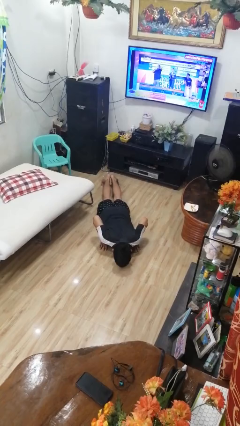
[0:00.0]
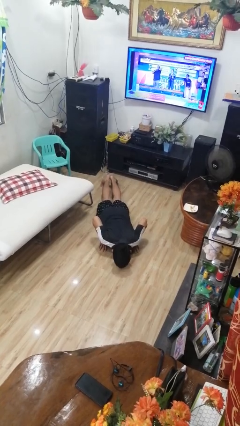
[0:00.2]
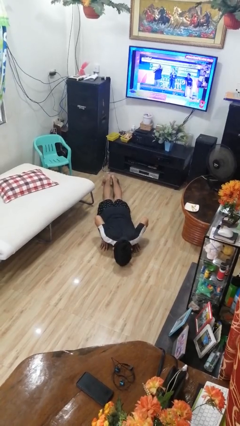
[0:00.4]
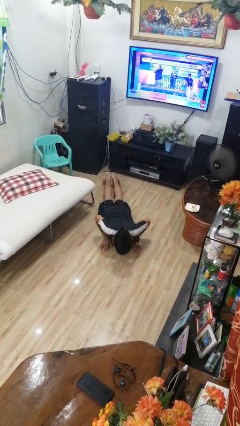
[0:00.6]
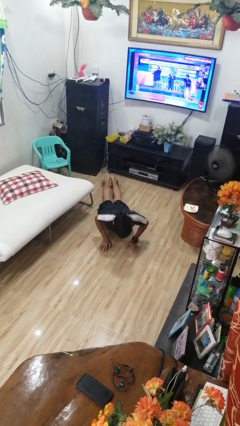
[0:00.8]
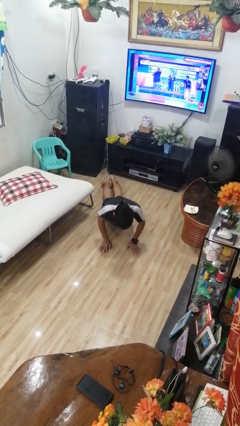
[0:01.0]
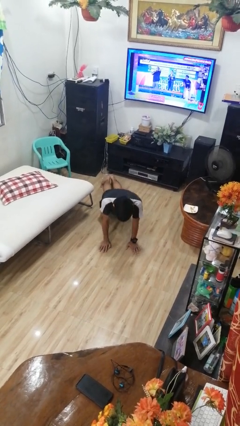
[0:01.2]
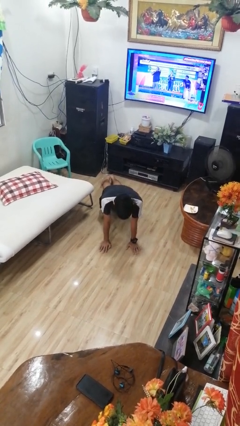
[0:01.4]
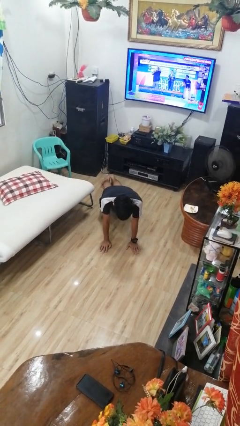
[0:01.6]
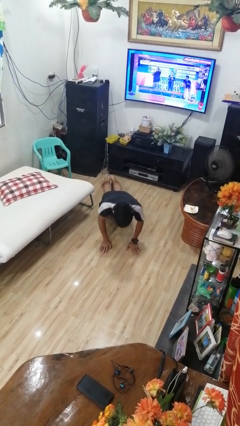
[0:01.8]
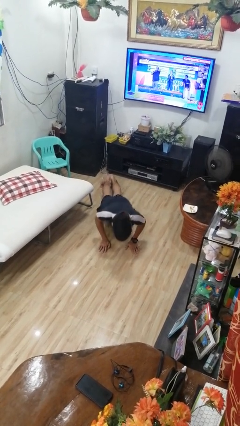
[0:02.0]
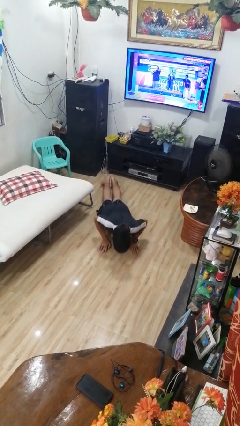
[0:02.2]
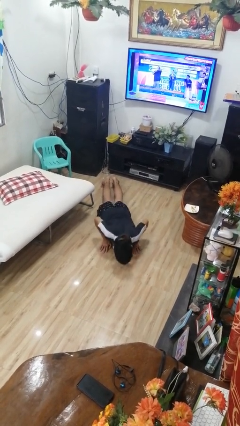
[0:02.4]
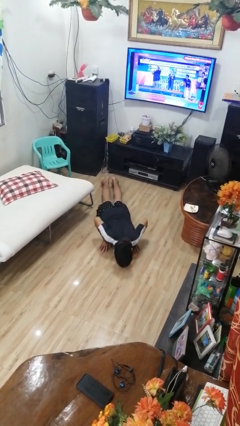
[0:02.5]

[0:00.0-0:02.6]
person exercises with pushup

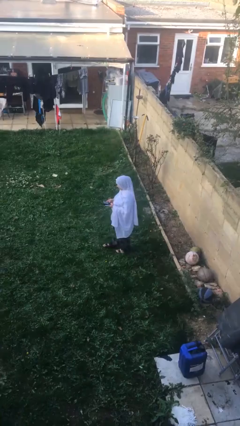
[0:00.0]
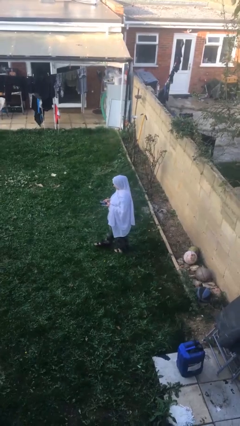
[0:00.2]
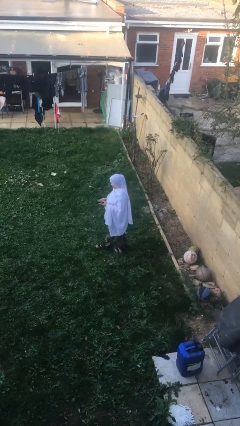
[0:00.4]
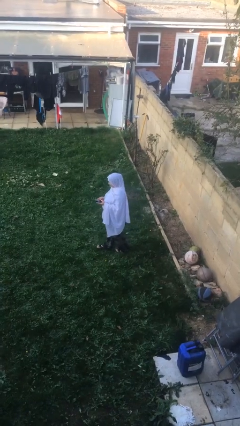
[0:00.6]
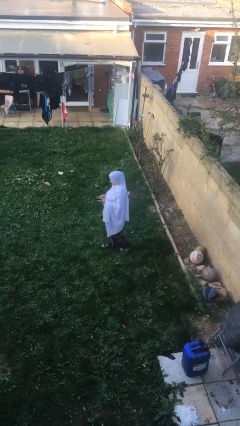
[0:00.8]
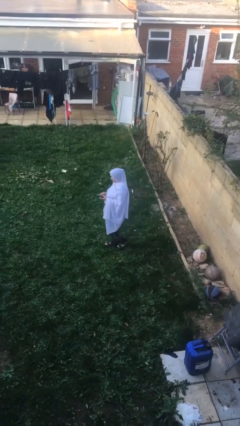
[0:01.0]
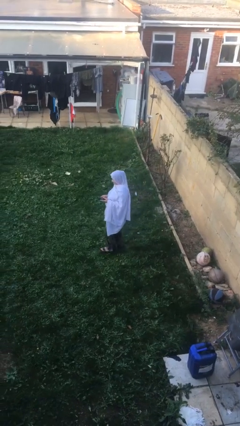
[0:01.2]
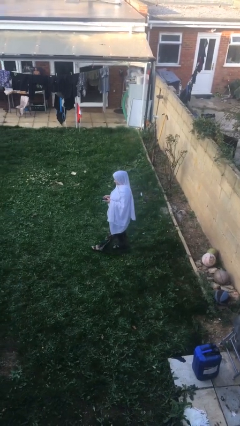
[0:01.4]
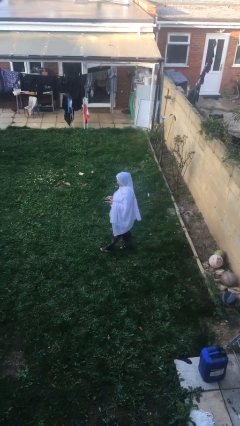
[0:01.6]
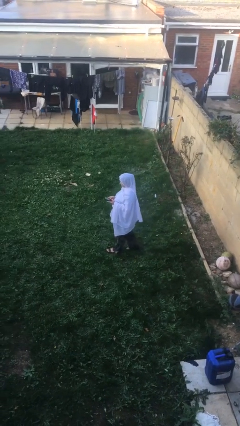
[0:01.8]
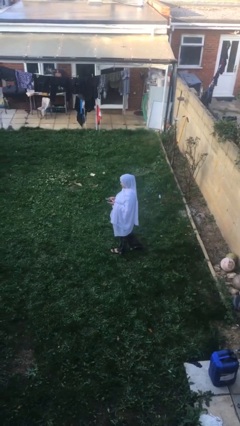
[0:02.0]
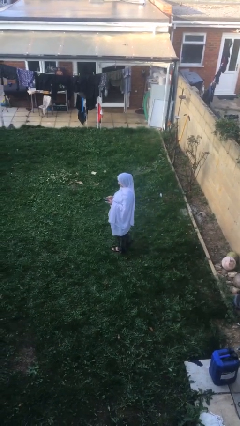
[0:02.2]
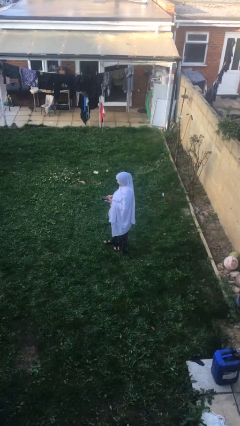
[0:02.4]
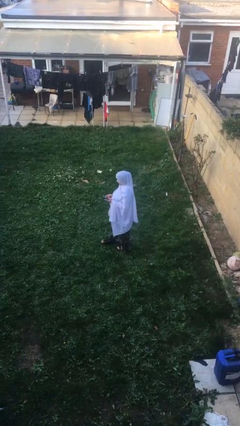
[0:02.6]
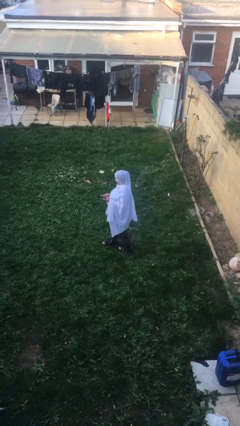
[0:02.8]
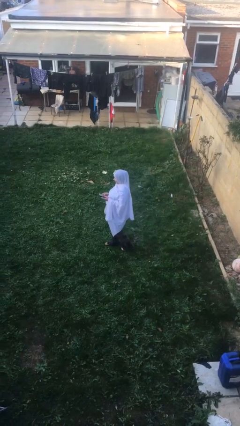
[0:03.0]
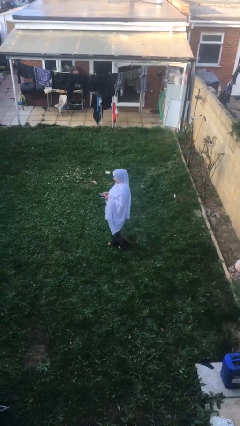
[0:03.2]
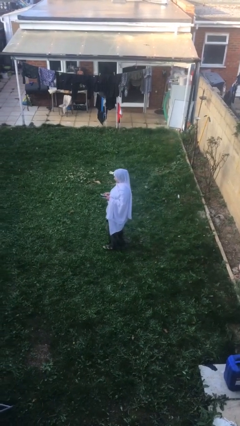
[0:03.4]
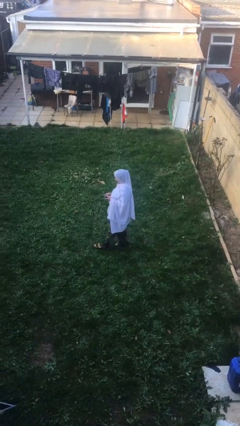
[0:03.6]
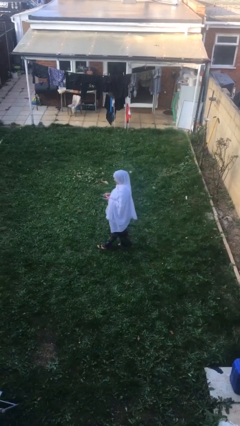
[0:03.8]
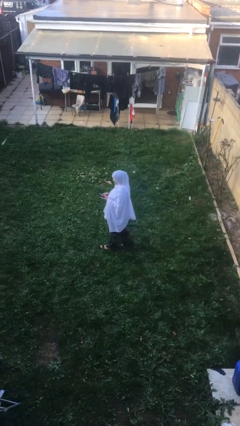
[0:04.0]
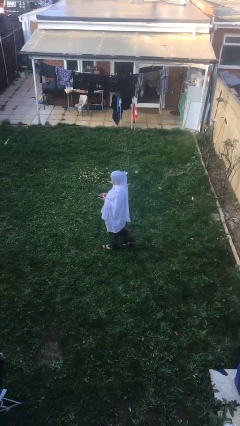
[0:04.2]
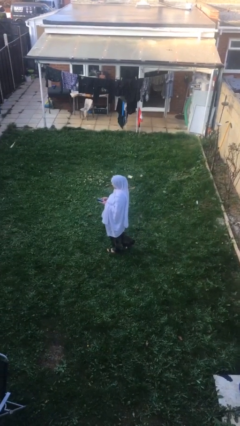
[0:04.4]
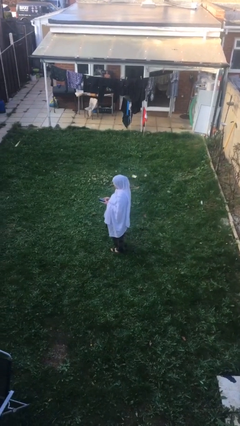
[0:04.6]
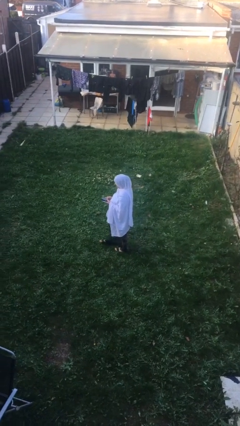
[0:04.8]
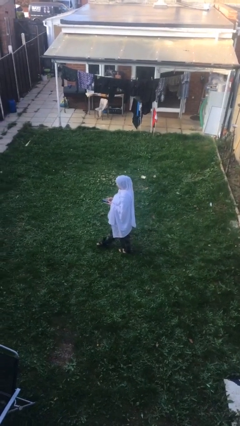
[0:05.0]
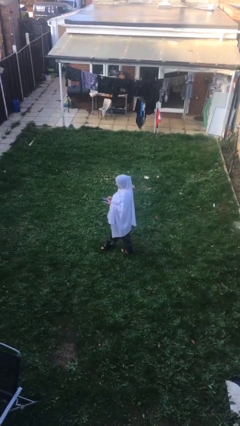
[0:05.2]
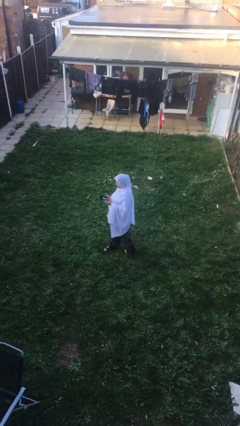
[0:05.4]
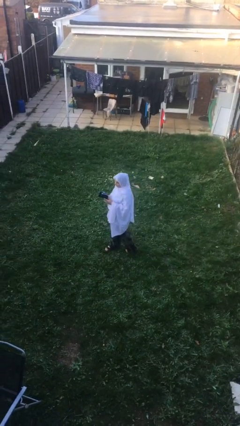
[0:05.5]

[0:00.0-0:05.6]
person texts on phone

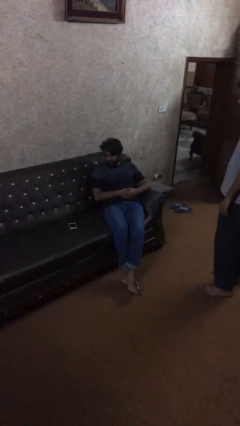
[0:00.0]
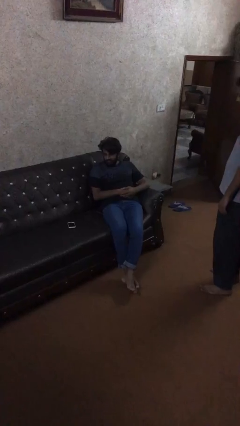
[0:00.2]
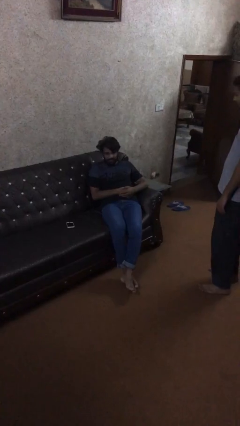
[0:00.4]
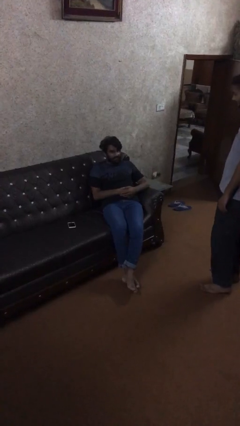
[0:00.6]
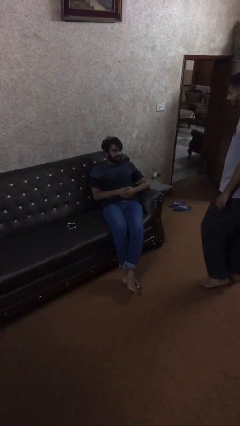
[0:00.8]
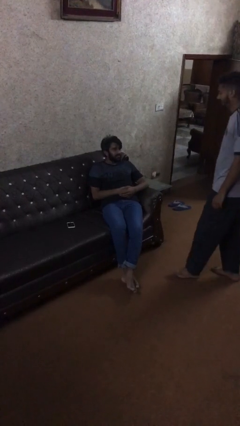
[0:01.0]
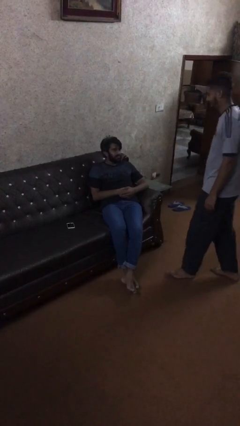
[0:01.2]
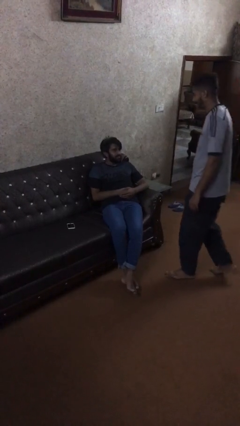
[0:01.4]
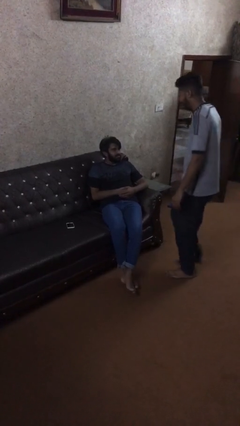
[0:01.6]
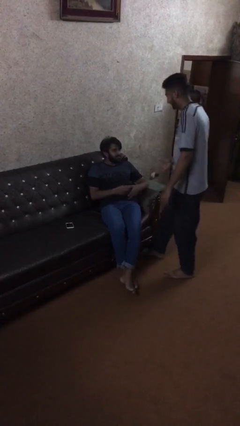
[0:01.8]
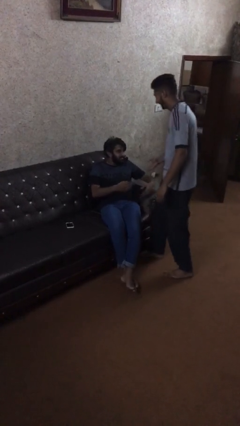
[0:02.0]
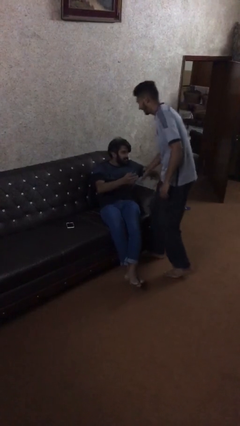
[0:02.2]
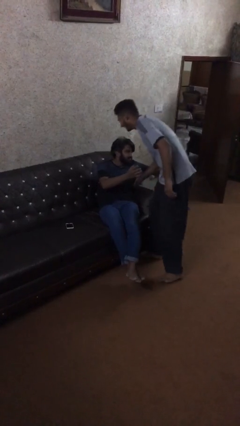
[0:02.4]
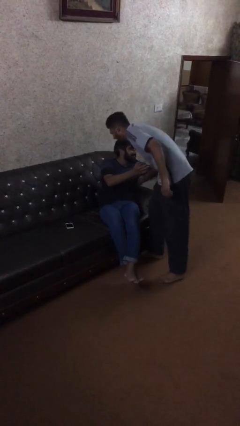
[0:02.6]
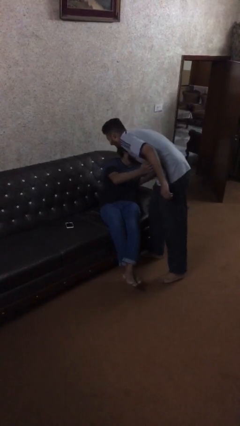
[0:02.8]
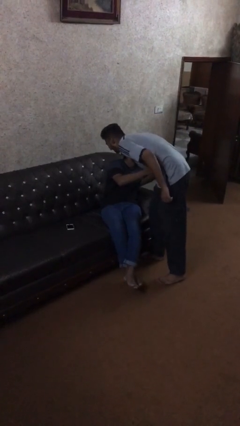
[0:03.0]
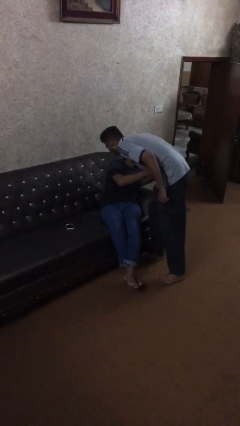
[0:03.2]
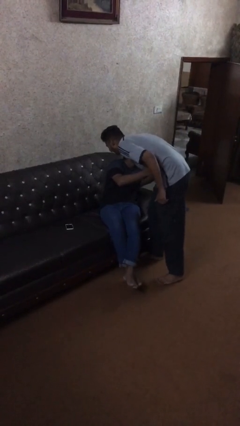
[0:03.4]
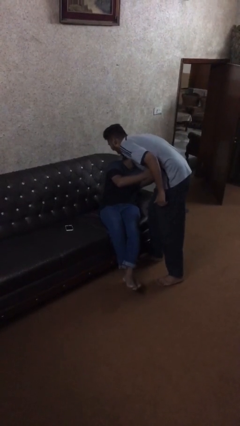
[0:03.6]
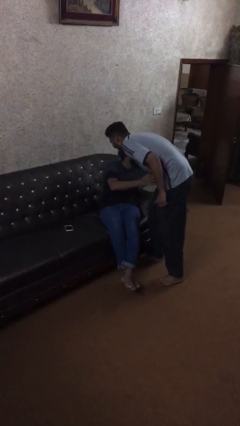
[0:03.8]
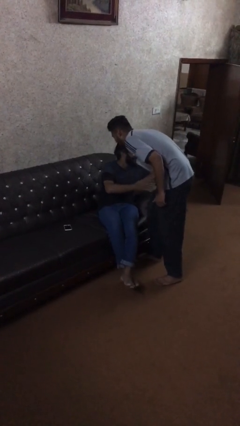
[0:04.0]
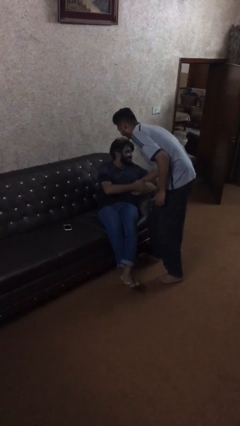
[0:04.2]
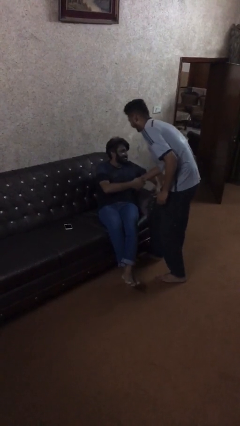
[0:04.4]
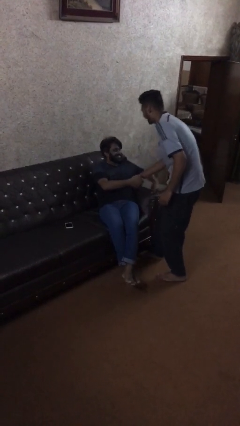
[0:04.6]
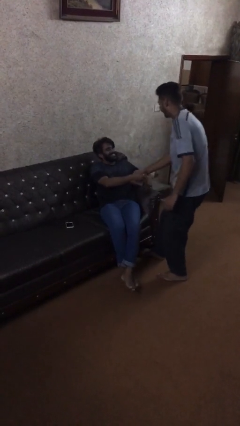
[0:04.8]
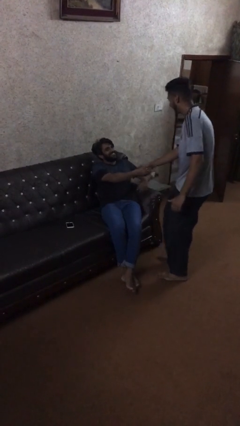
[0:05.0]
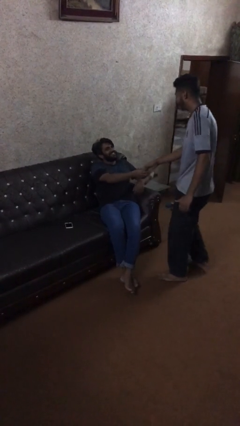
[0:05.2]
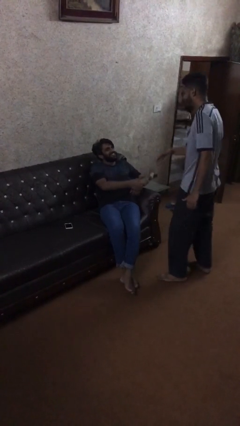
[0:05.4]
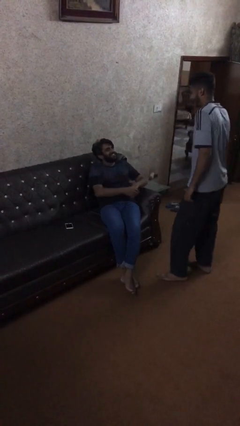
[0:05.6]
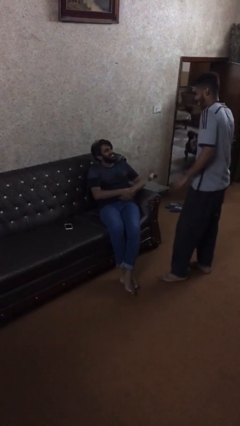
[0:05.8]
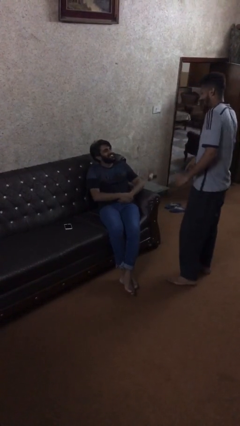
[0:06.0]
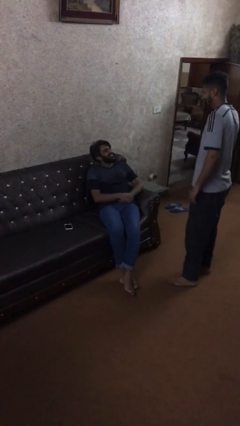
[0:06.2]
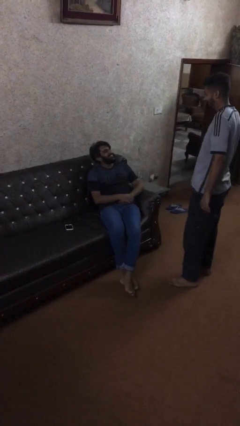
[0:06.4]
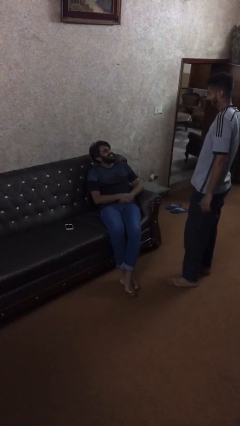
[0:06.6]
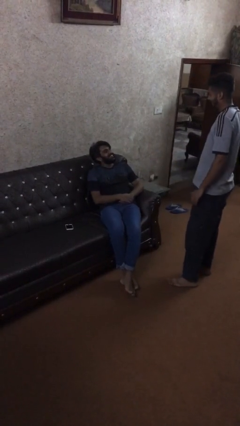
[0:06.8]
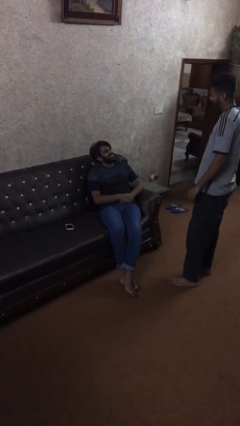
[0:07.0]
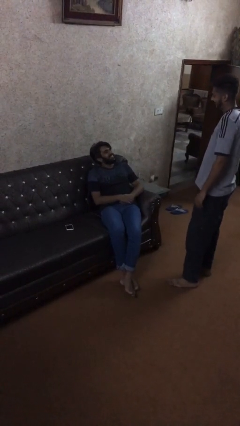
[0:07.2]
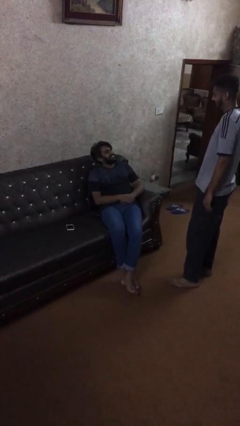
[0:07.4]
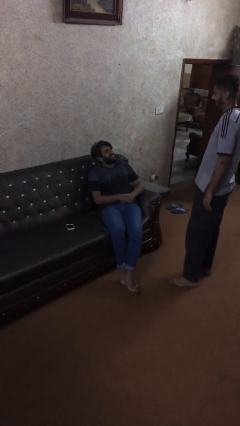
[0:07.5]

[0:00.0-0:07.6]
person embraces person

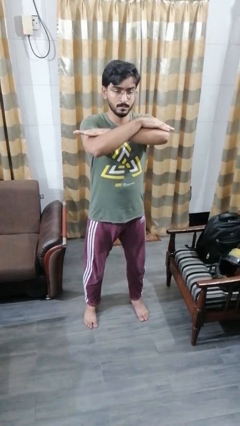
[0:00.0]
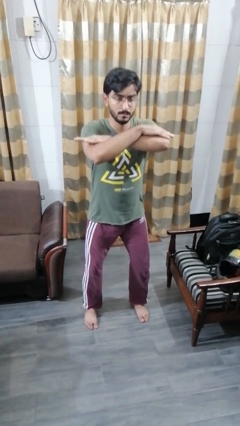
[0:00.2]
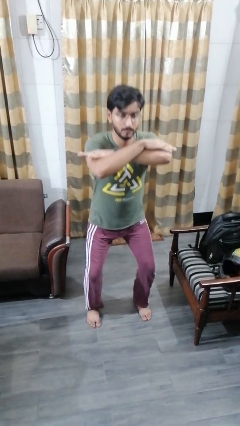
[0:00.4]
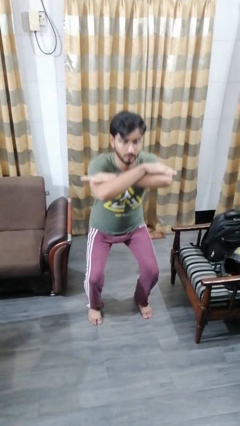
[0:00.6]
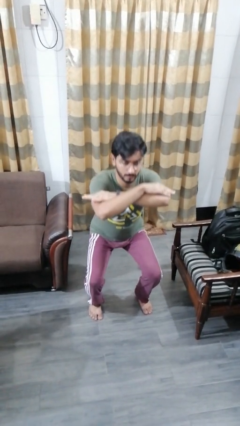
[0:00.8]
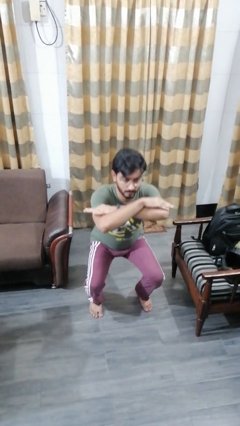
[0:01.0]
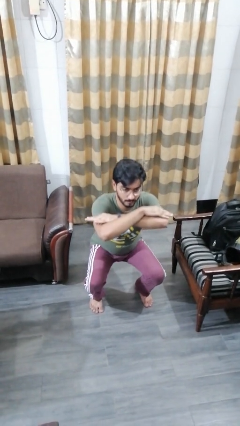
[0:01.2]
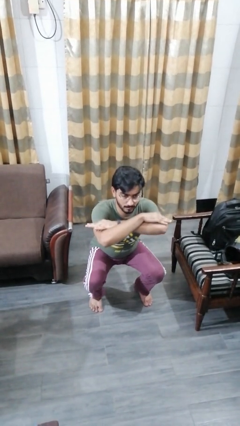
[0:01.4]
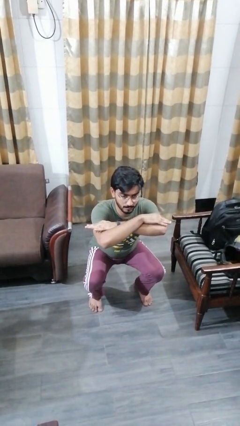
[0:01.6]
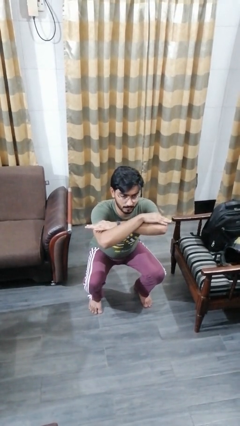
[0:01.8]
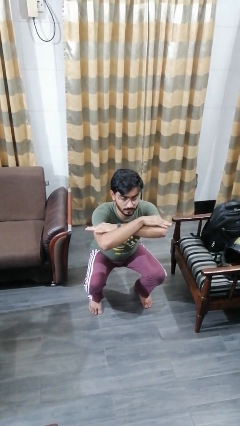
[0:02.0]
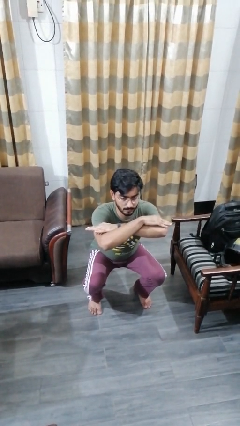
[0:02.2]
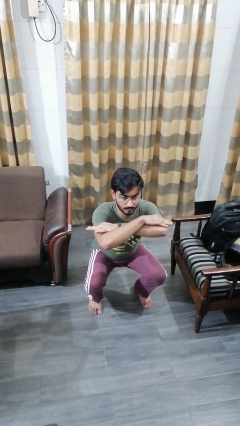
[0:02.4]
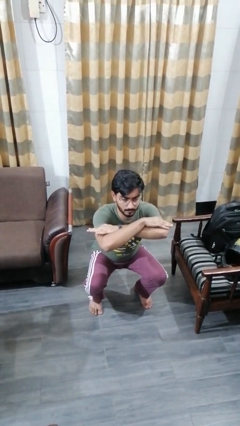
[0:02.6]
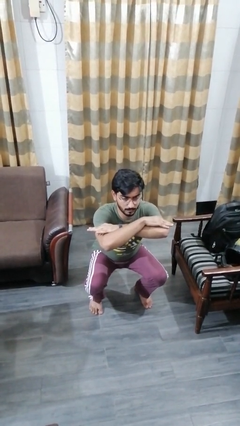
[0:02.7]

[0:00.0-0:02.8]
person sits crisscross
